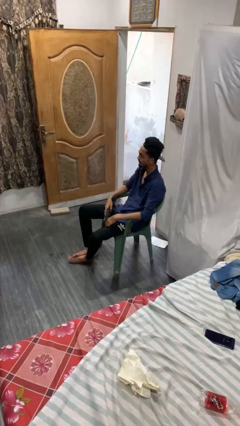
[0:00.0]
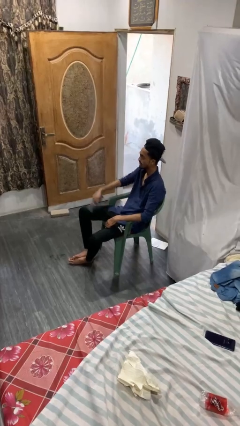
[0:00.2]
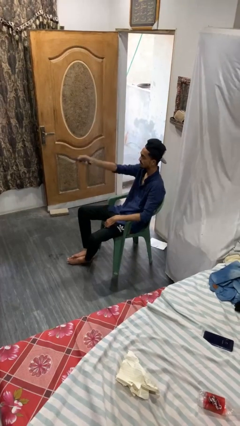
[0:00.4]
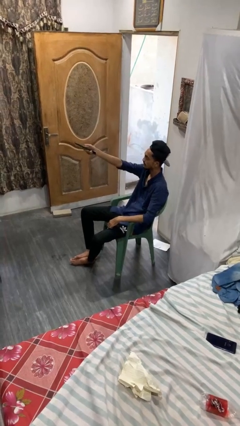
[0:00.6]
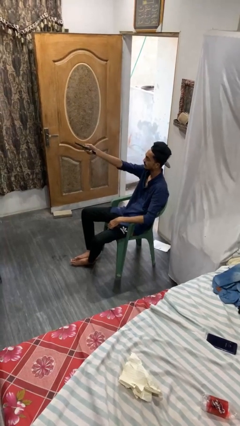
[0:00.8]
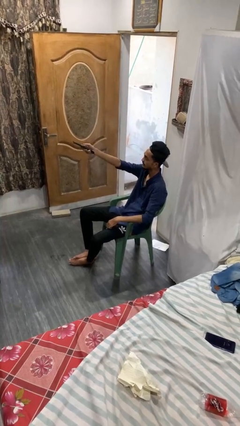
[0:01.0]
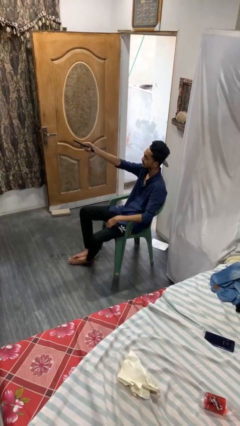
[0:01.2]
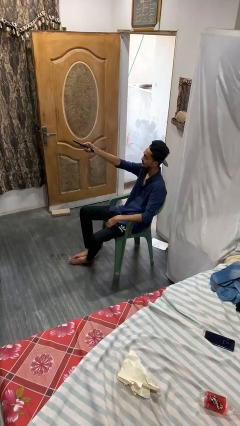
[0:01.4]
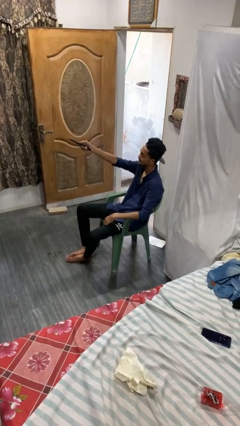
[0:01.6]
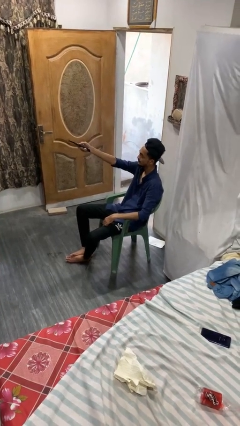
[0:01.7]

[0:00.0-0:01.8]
person uses television remote

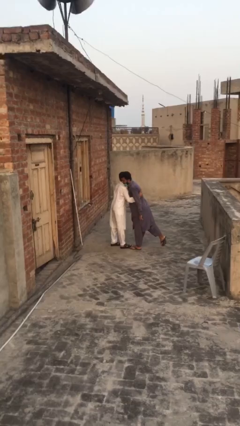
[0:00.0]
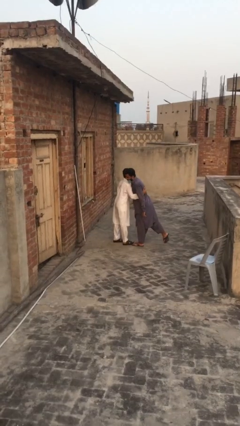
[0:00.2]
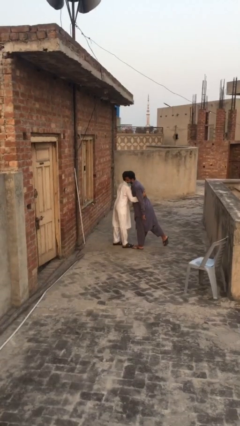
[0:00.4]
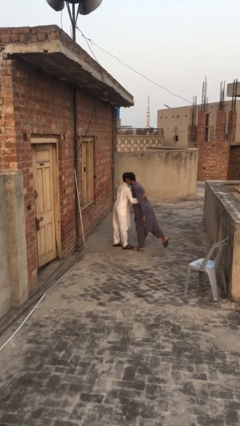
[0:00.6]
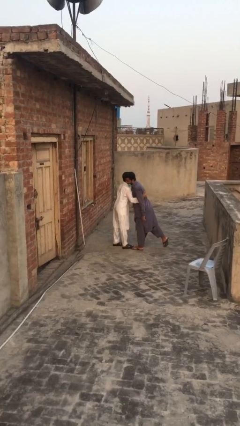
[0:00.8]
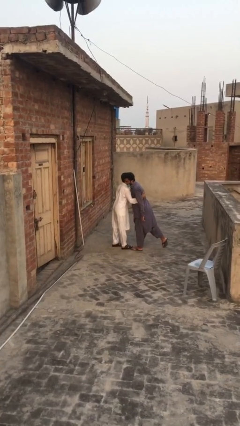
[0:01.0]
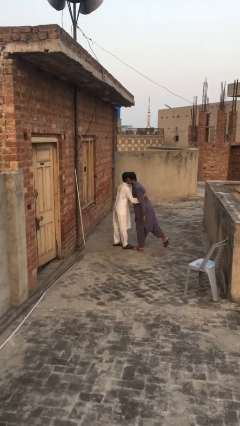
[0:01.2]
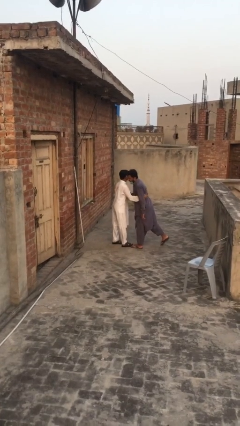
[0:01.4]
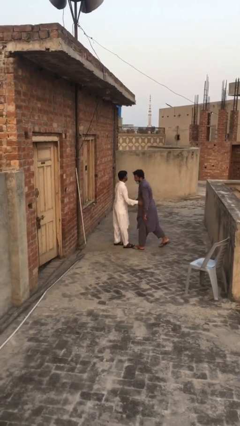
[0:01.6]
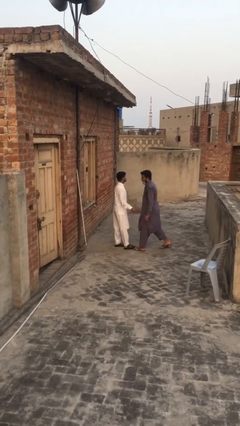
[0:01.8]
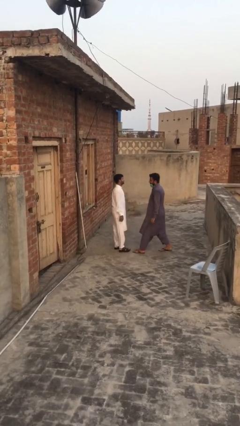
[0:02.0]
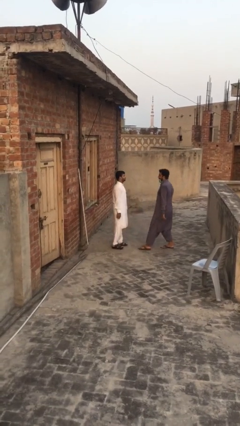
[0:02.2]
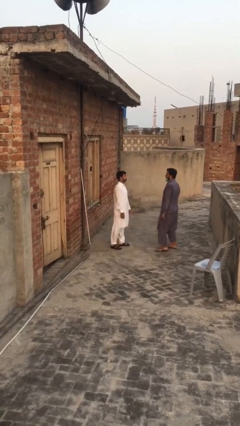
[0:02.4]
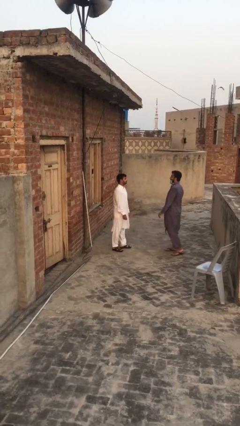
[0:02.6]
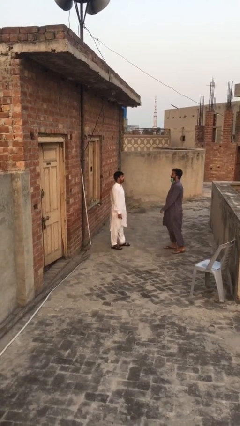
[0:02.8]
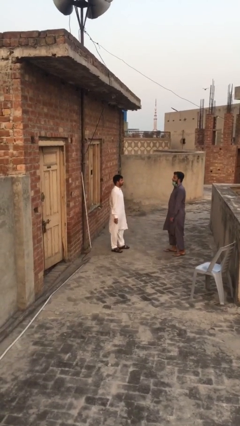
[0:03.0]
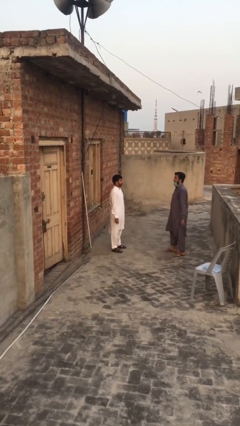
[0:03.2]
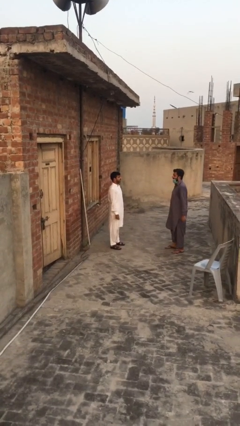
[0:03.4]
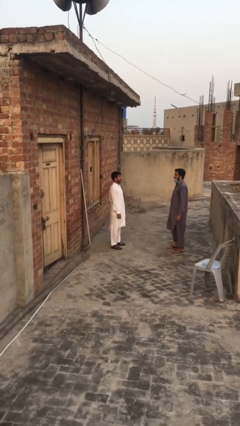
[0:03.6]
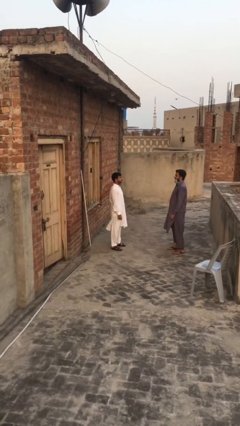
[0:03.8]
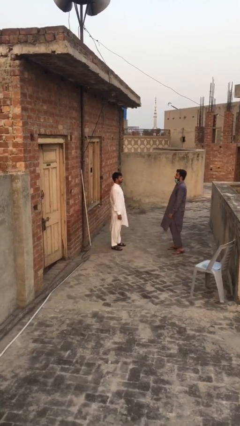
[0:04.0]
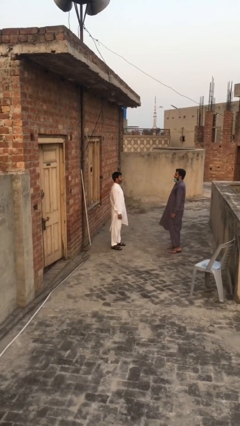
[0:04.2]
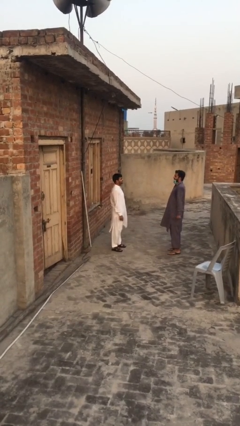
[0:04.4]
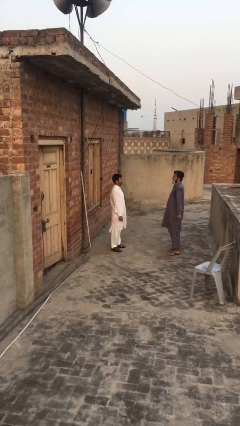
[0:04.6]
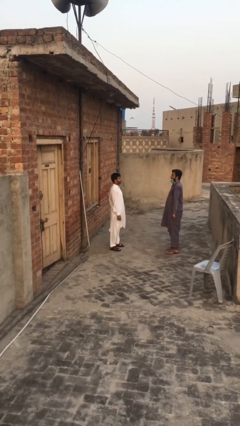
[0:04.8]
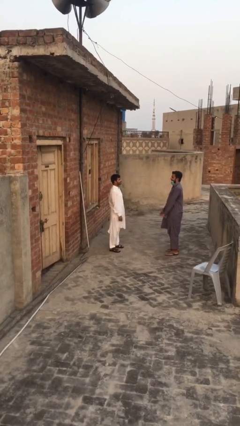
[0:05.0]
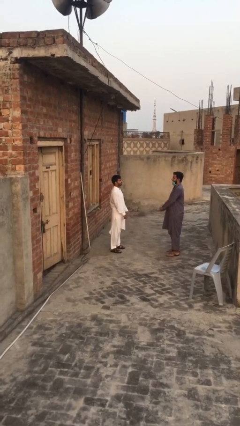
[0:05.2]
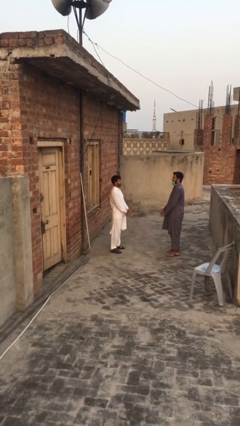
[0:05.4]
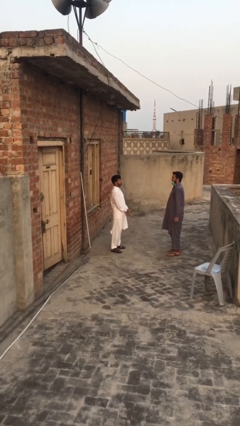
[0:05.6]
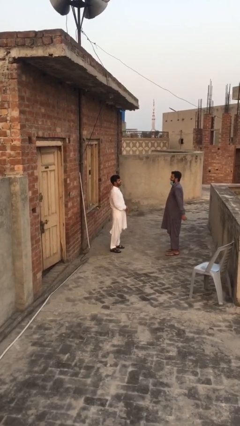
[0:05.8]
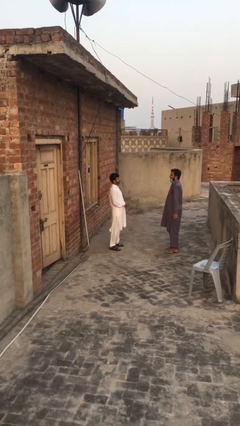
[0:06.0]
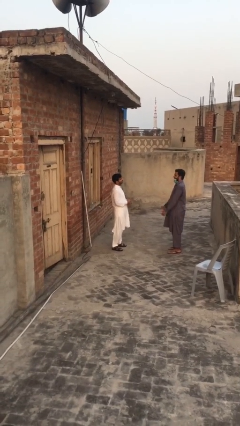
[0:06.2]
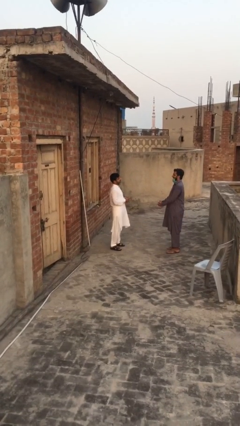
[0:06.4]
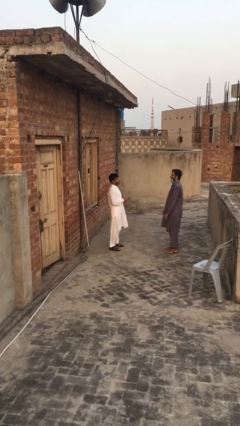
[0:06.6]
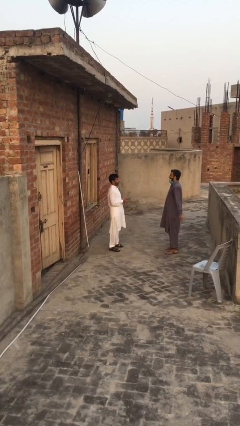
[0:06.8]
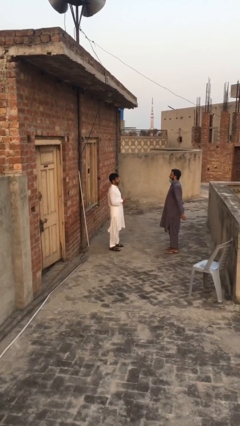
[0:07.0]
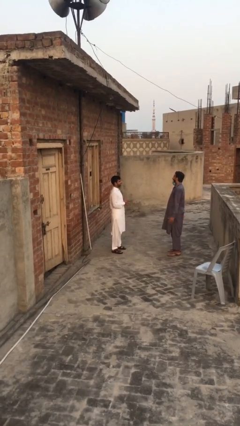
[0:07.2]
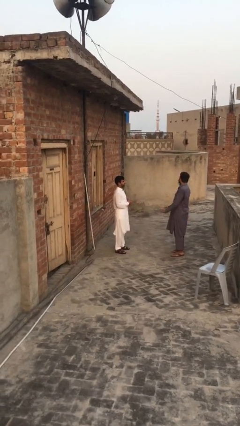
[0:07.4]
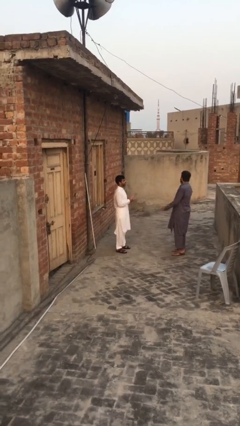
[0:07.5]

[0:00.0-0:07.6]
person talks to person

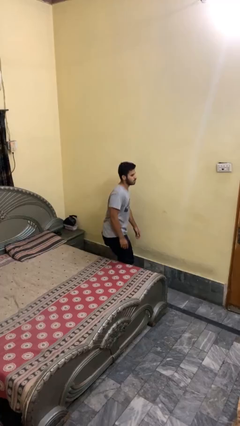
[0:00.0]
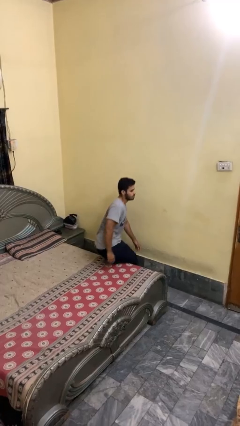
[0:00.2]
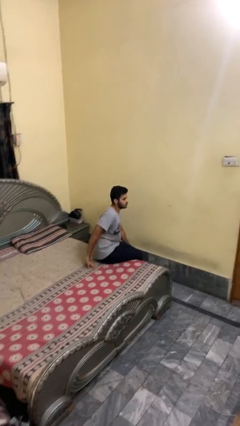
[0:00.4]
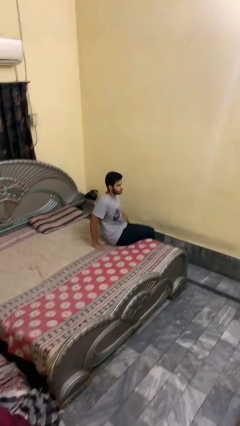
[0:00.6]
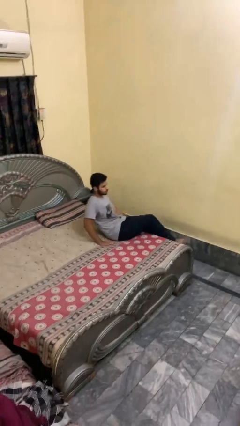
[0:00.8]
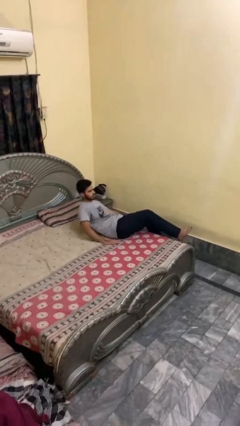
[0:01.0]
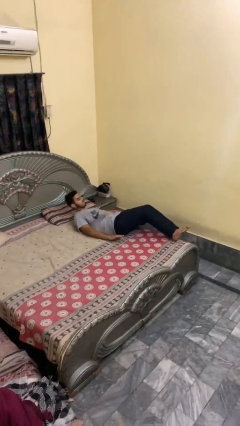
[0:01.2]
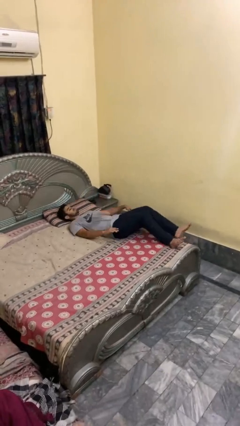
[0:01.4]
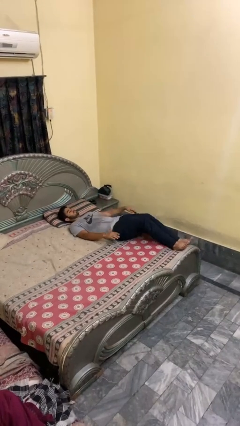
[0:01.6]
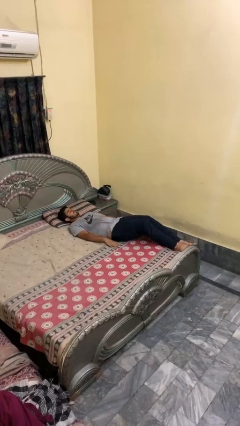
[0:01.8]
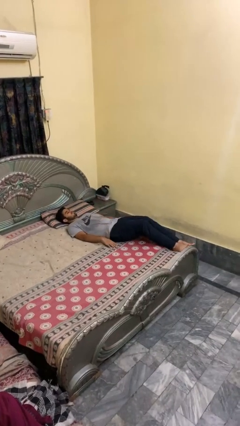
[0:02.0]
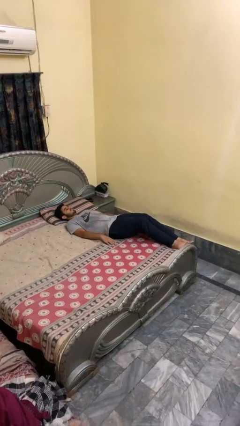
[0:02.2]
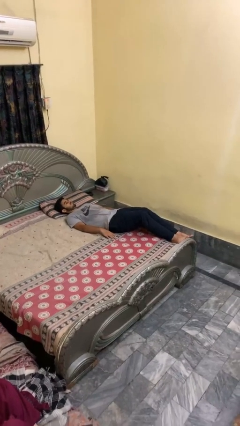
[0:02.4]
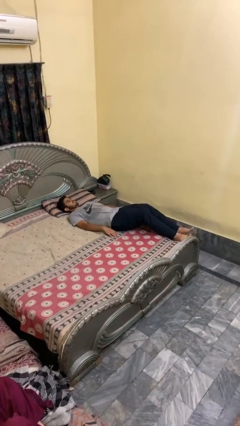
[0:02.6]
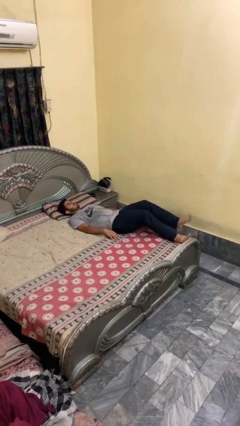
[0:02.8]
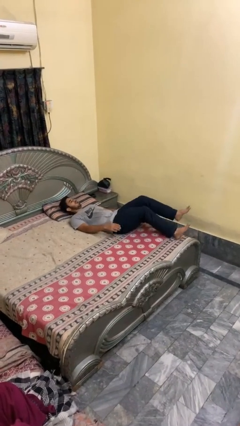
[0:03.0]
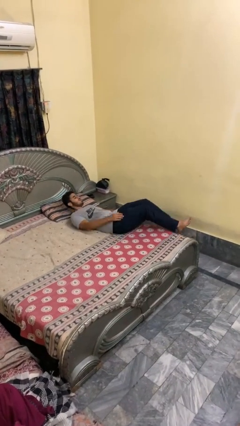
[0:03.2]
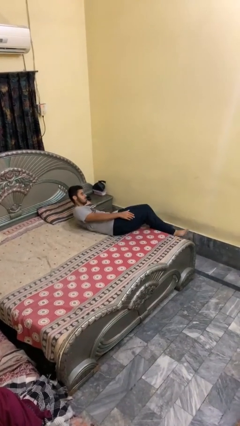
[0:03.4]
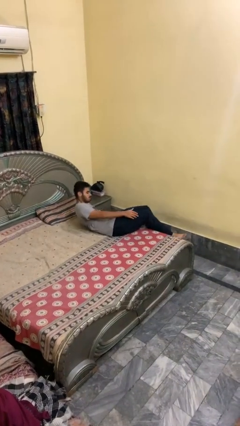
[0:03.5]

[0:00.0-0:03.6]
person lies down on bed

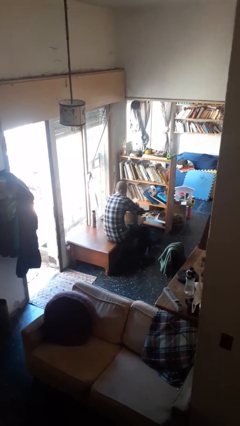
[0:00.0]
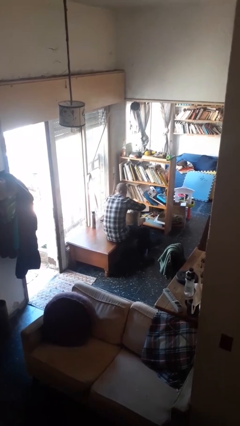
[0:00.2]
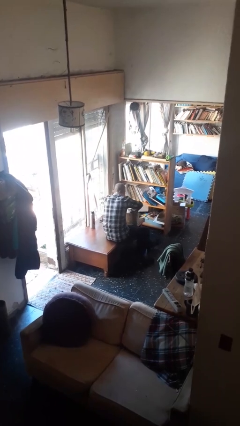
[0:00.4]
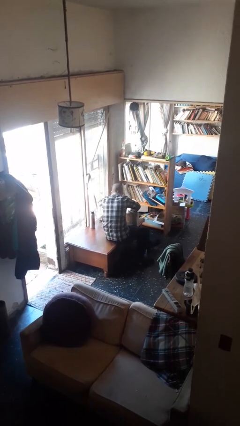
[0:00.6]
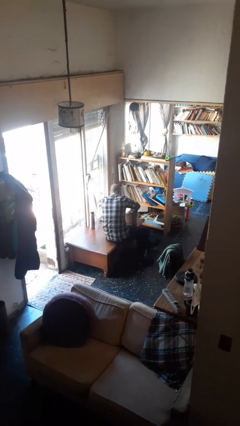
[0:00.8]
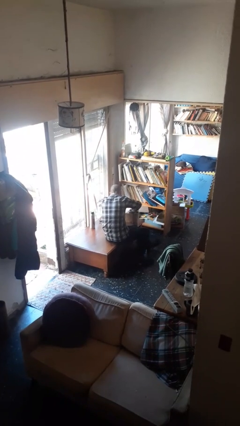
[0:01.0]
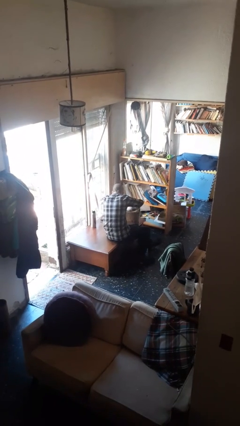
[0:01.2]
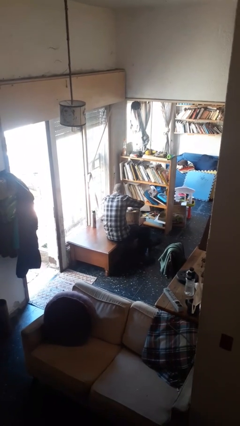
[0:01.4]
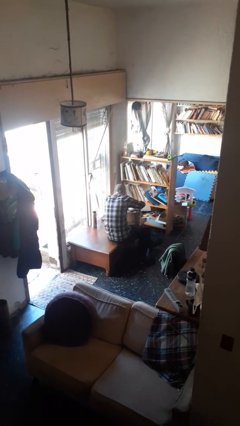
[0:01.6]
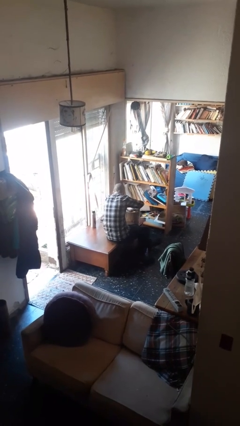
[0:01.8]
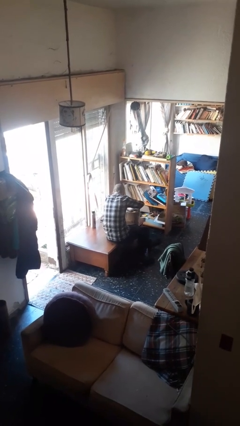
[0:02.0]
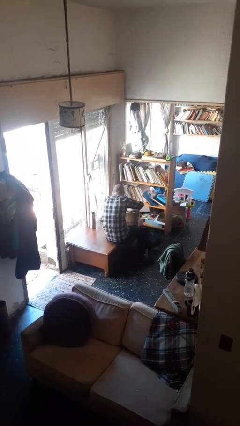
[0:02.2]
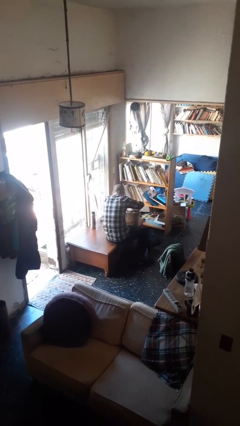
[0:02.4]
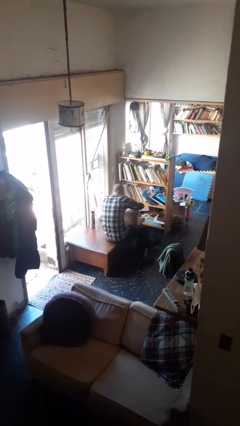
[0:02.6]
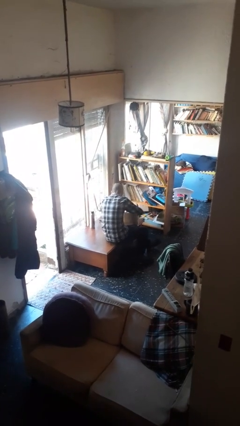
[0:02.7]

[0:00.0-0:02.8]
person searches in box

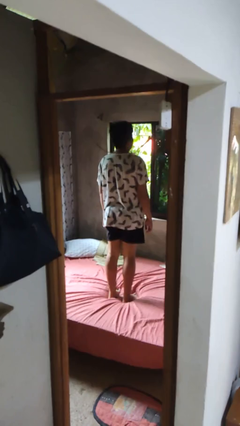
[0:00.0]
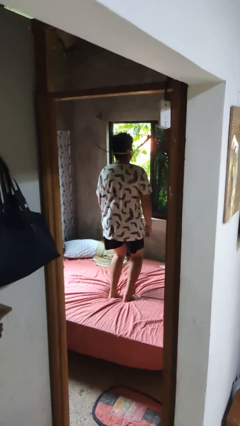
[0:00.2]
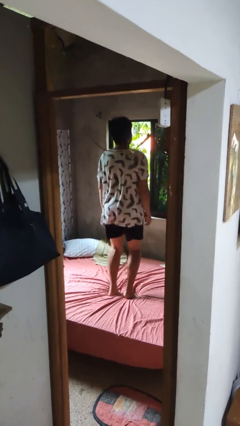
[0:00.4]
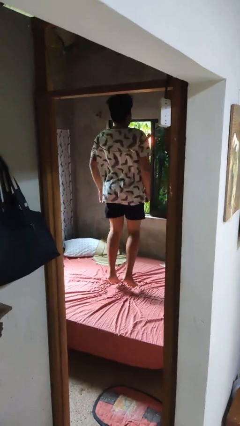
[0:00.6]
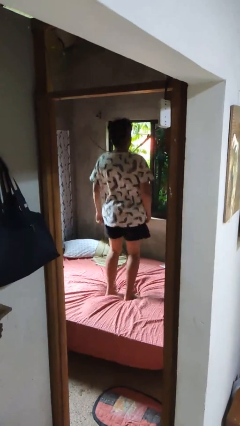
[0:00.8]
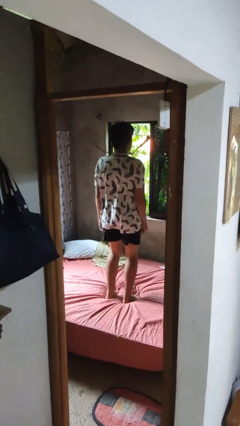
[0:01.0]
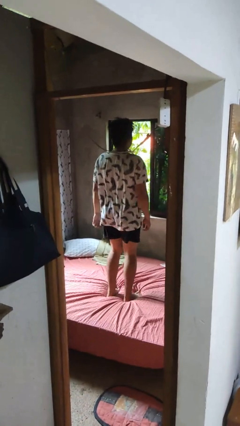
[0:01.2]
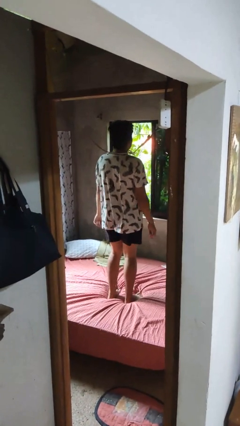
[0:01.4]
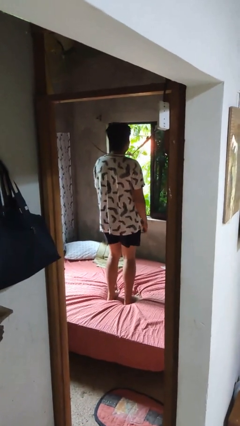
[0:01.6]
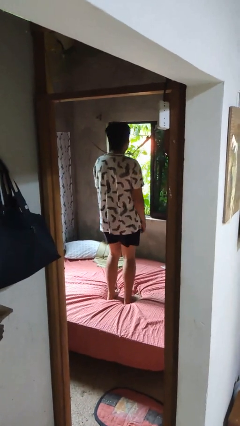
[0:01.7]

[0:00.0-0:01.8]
person jumps on bed

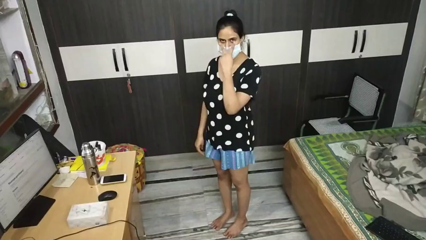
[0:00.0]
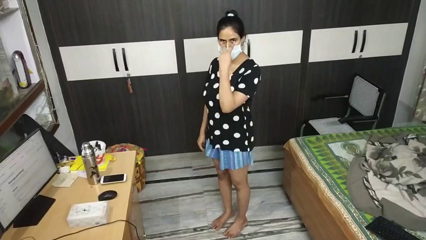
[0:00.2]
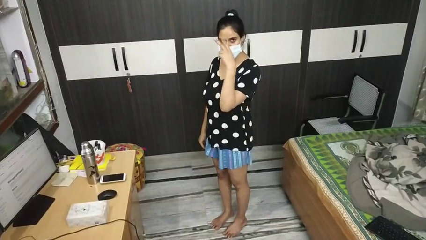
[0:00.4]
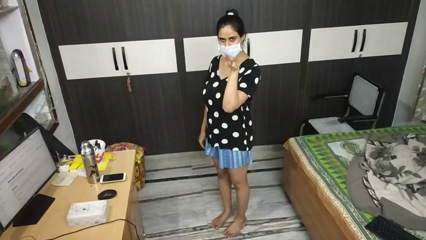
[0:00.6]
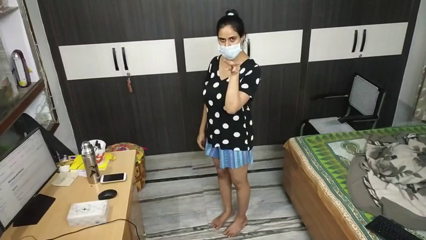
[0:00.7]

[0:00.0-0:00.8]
person gestures watch closely
